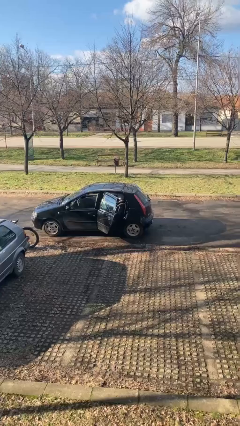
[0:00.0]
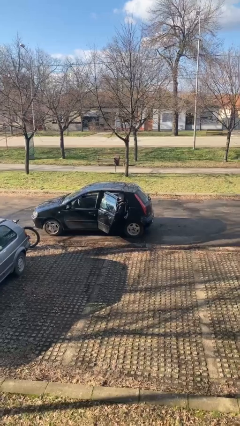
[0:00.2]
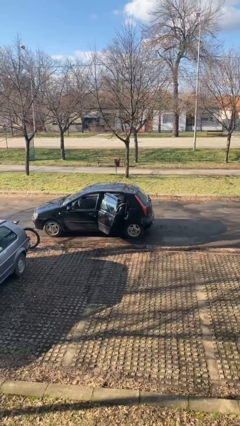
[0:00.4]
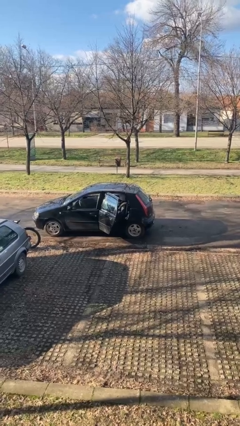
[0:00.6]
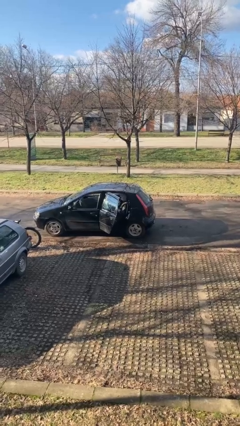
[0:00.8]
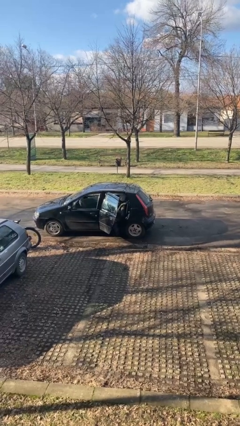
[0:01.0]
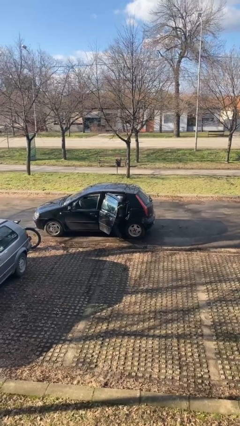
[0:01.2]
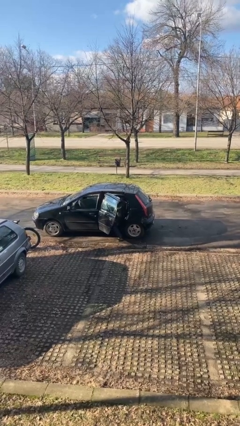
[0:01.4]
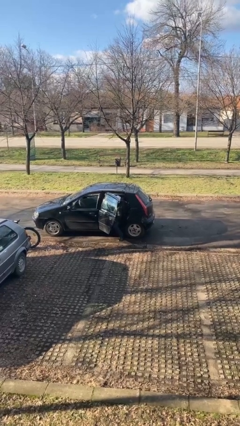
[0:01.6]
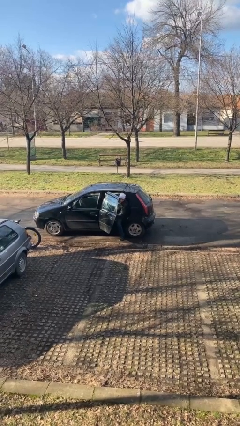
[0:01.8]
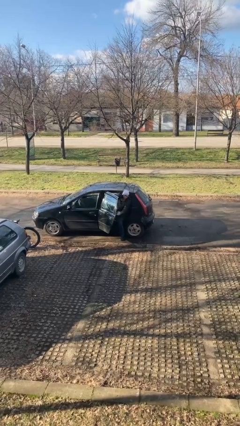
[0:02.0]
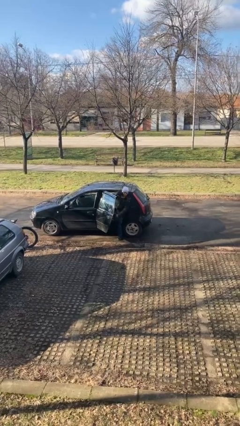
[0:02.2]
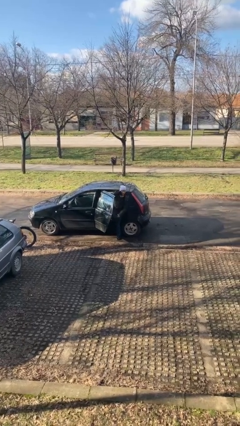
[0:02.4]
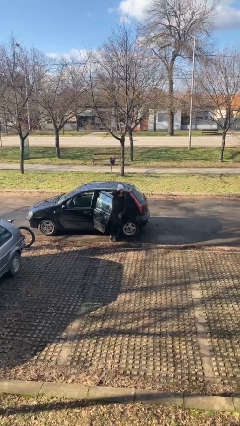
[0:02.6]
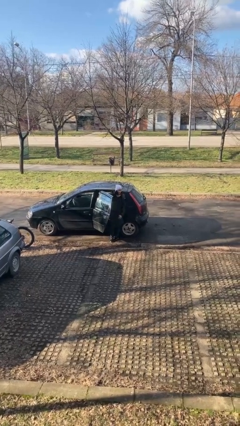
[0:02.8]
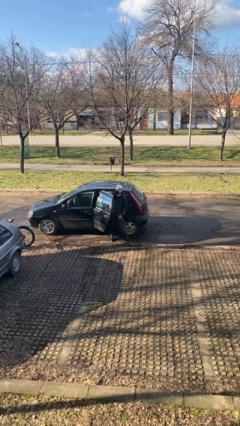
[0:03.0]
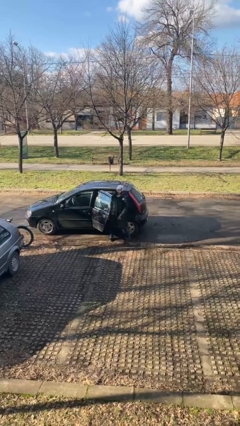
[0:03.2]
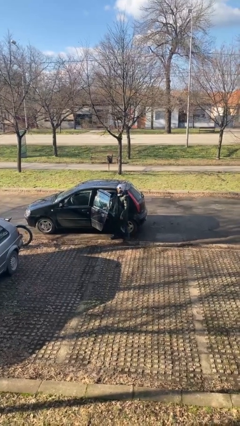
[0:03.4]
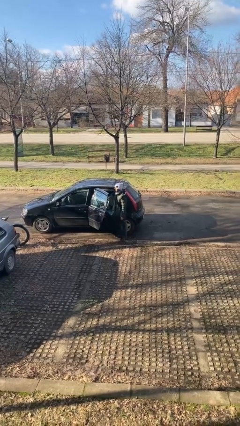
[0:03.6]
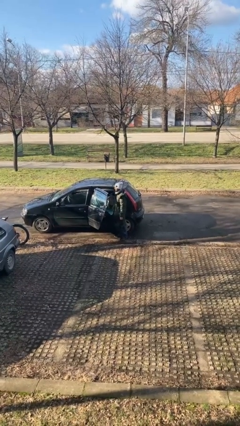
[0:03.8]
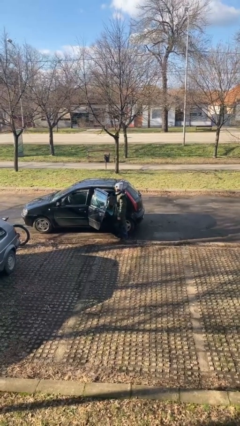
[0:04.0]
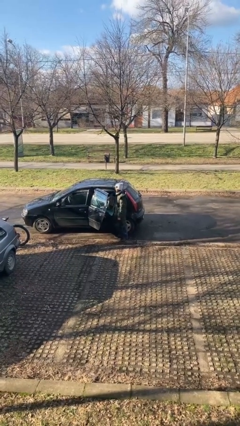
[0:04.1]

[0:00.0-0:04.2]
person exits car

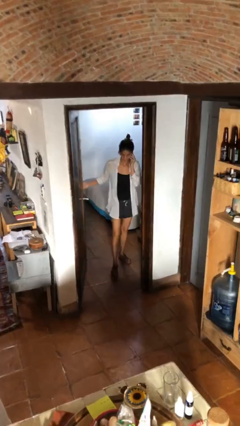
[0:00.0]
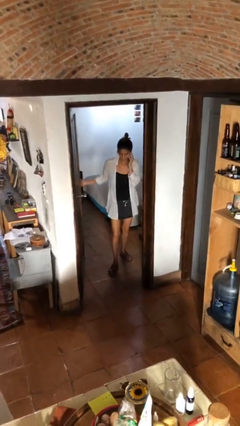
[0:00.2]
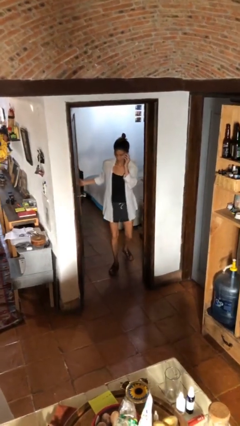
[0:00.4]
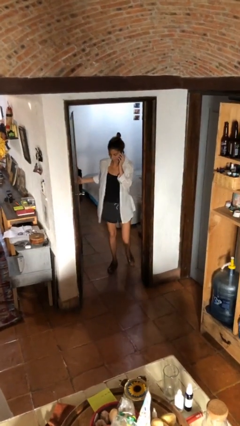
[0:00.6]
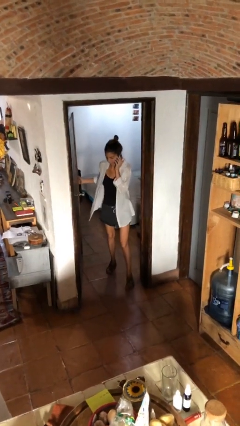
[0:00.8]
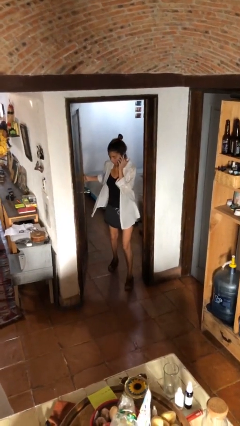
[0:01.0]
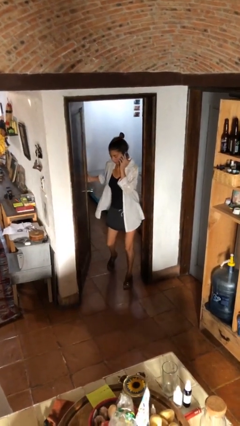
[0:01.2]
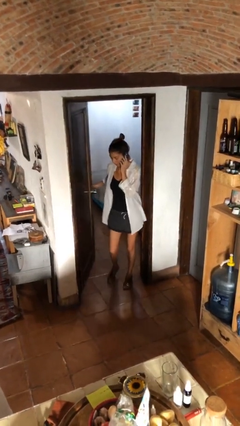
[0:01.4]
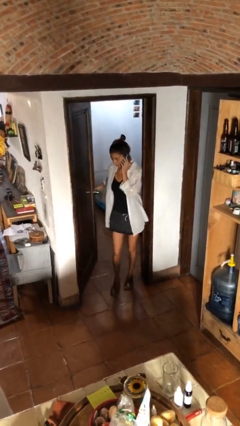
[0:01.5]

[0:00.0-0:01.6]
person enters scene through structure

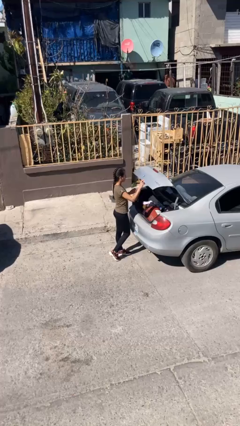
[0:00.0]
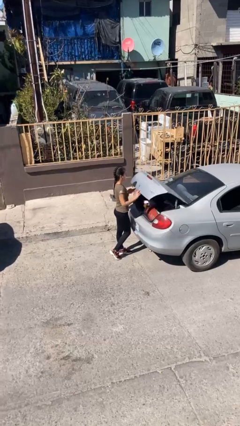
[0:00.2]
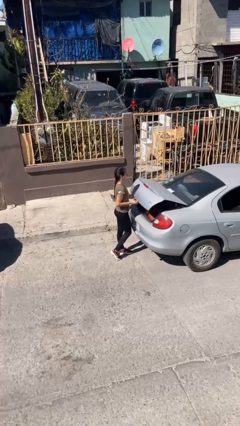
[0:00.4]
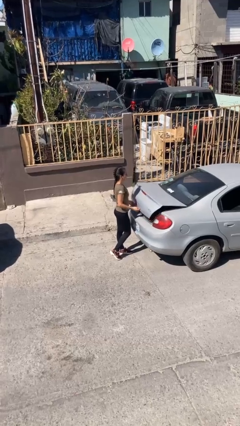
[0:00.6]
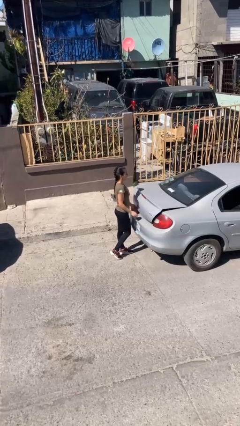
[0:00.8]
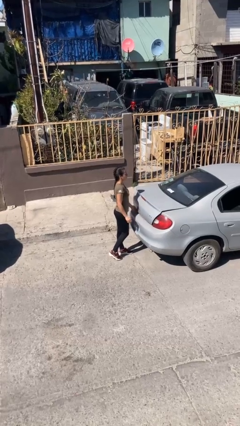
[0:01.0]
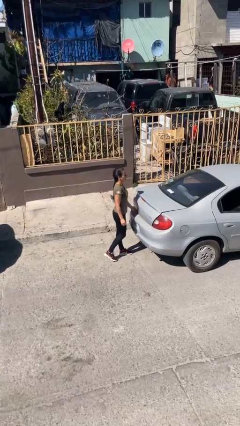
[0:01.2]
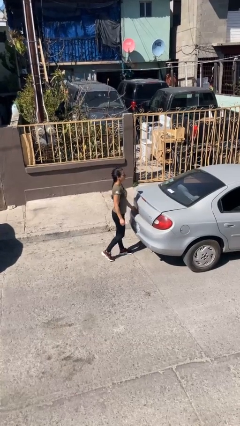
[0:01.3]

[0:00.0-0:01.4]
person closes car trunk

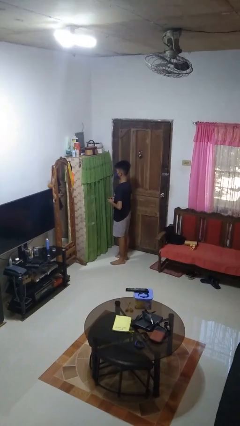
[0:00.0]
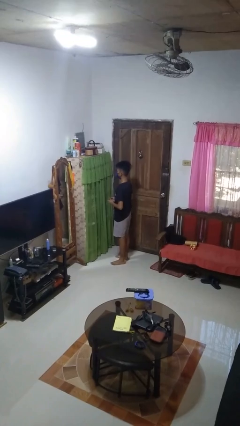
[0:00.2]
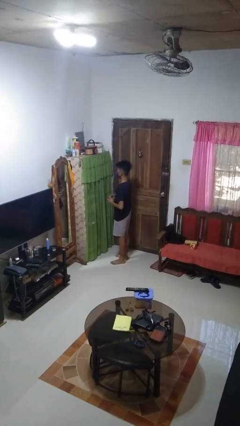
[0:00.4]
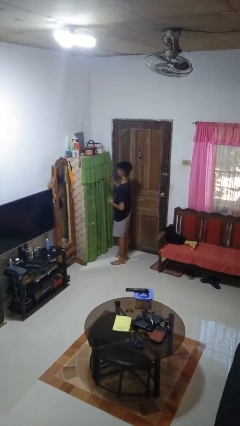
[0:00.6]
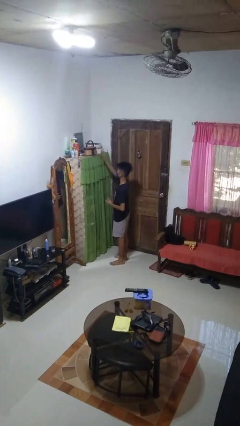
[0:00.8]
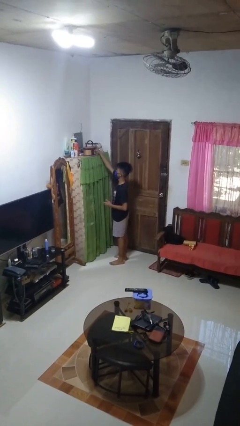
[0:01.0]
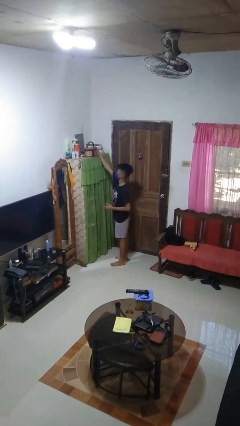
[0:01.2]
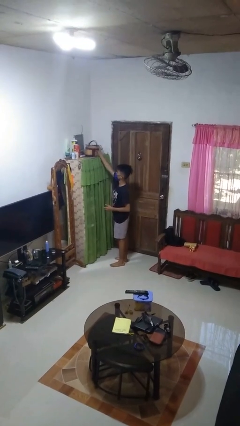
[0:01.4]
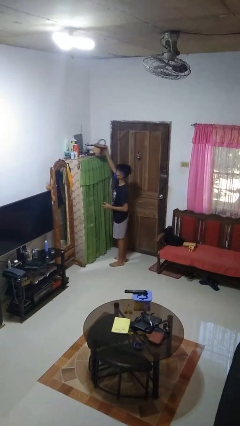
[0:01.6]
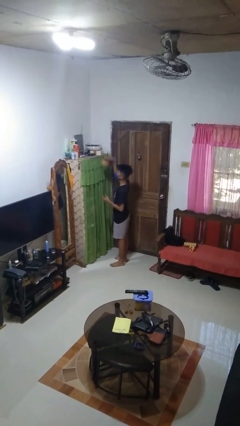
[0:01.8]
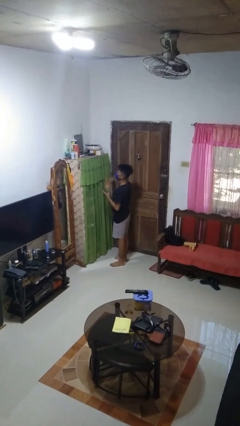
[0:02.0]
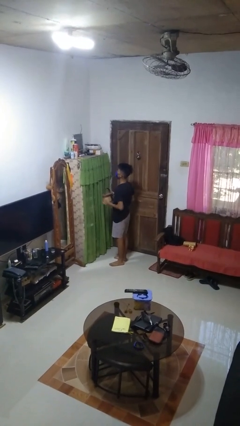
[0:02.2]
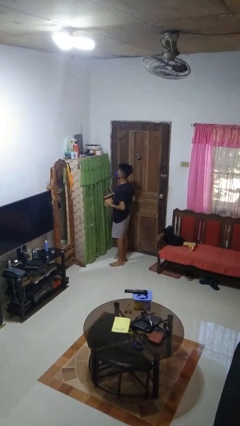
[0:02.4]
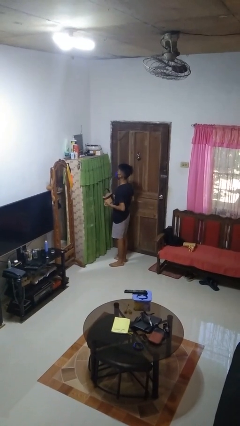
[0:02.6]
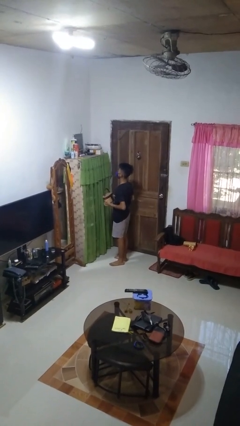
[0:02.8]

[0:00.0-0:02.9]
person picks up object from shelf

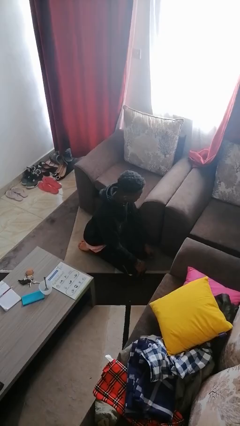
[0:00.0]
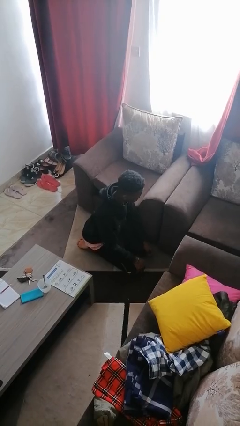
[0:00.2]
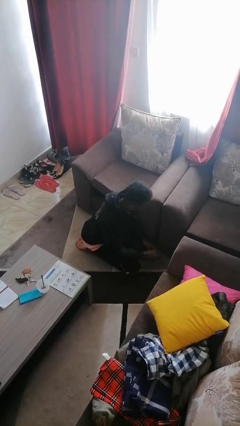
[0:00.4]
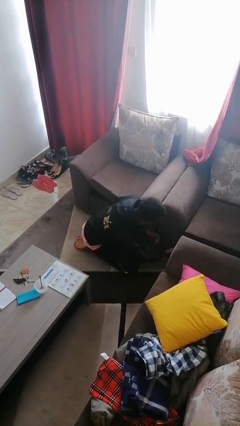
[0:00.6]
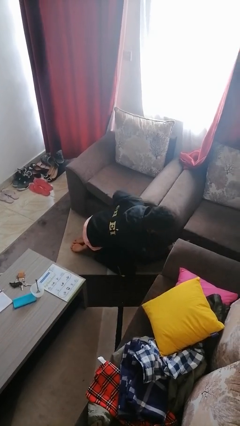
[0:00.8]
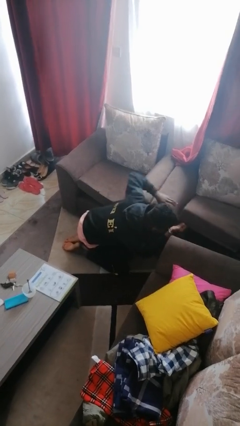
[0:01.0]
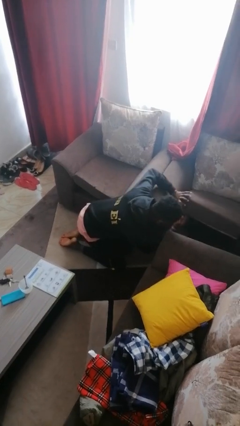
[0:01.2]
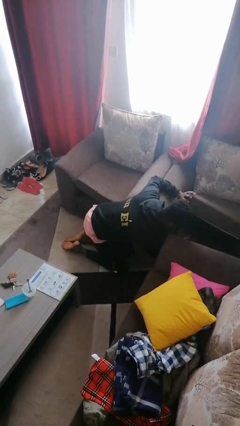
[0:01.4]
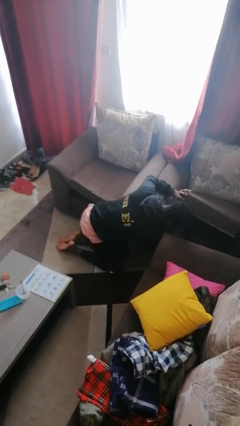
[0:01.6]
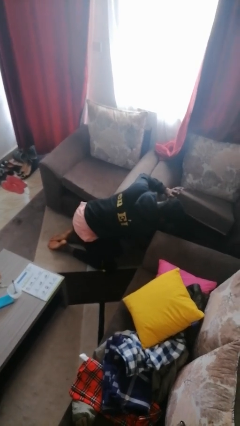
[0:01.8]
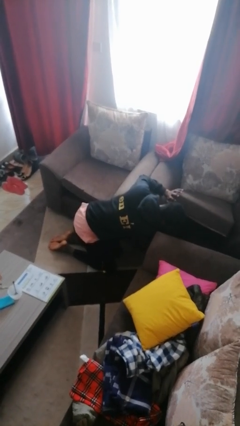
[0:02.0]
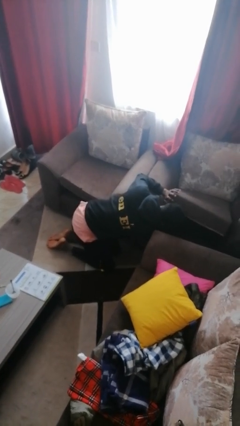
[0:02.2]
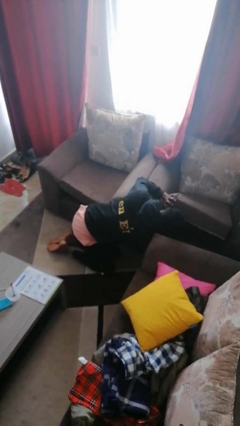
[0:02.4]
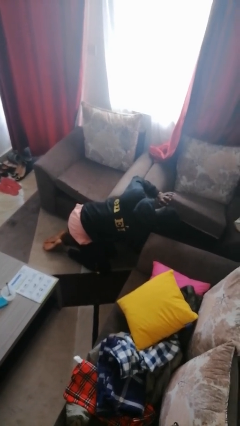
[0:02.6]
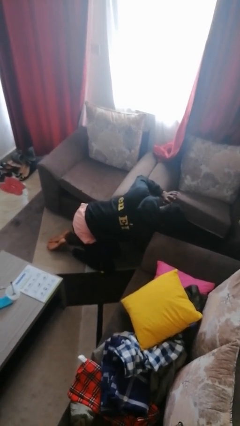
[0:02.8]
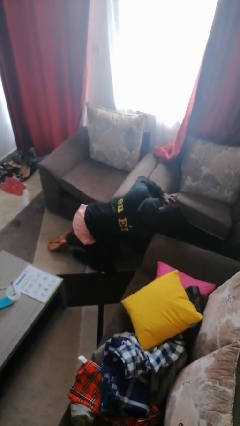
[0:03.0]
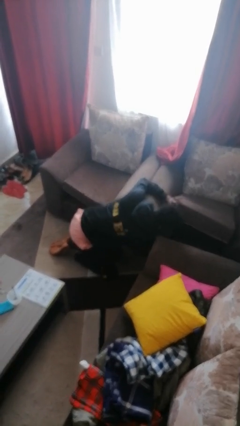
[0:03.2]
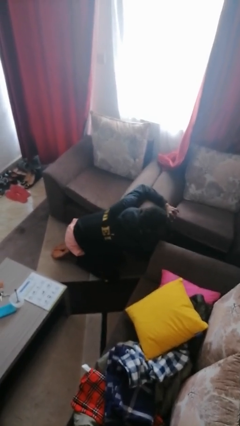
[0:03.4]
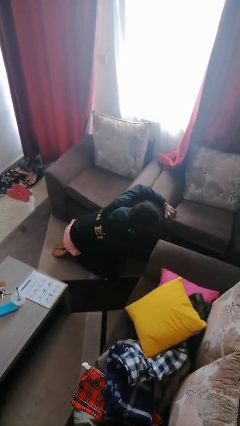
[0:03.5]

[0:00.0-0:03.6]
person searches in couch

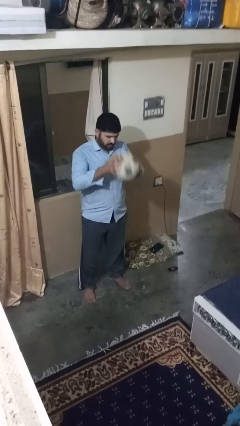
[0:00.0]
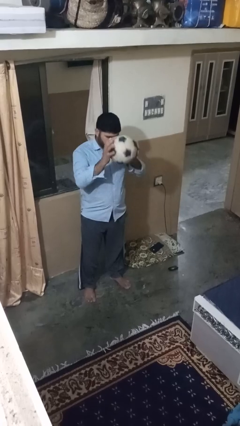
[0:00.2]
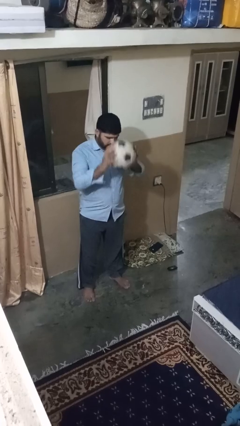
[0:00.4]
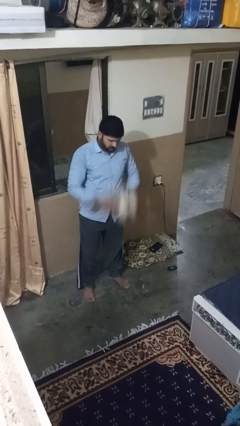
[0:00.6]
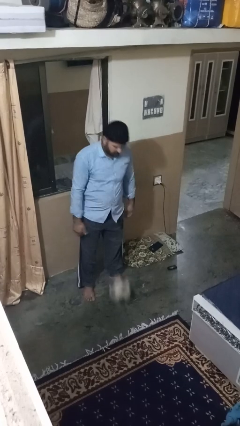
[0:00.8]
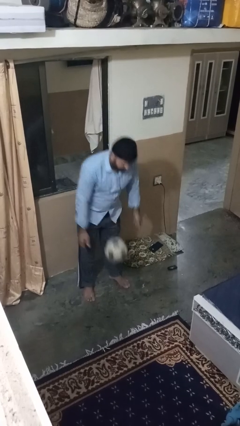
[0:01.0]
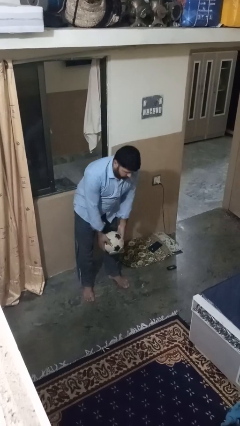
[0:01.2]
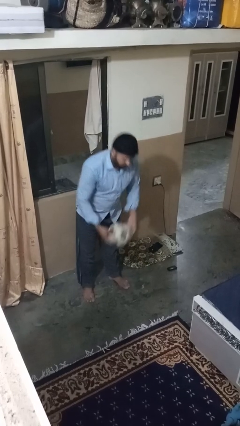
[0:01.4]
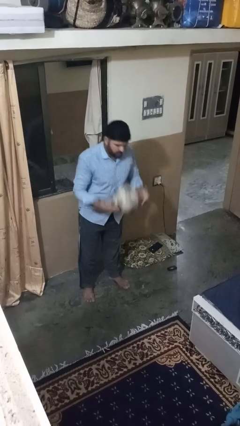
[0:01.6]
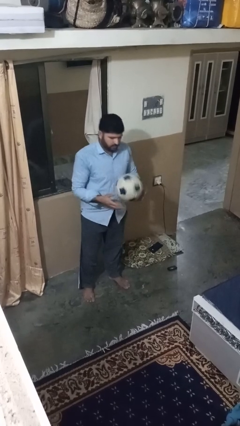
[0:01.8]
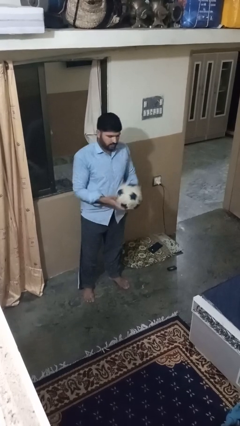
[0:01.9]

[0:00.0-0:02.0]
person bounces ball on floor

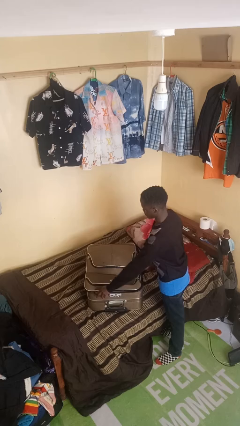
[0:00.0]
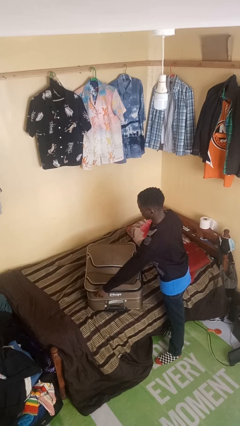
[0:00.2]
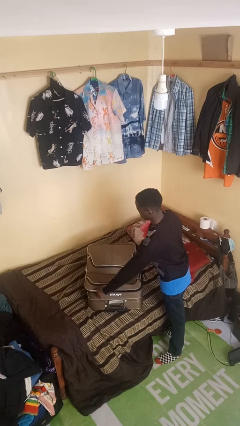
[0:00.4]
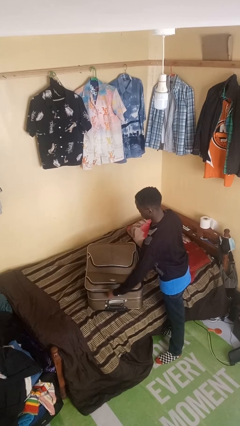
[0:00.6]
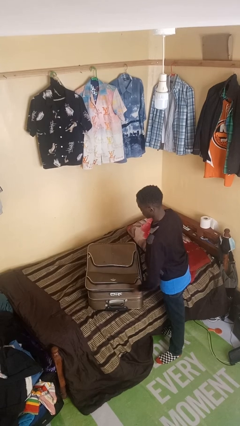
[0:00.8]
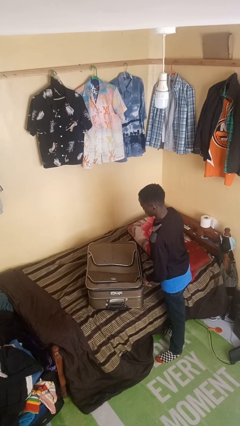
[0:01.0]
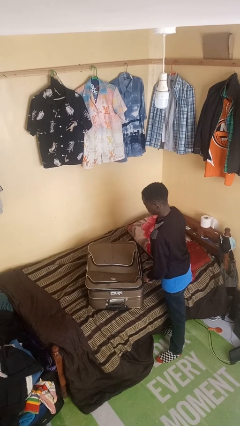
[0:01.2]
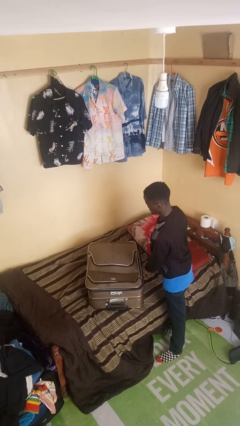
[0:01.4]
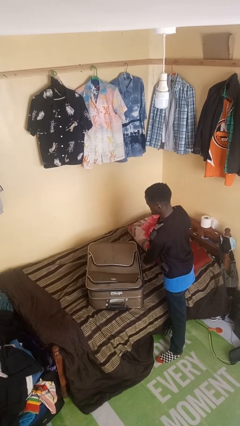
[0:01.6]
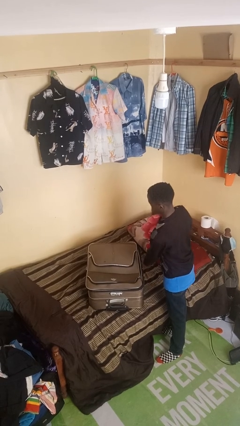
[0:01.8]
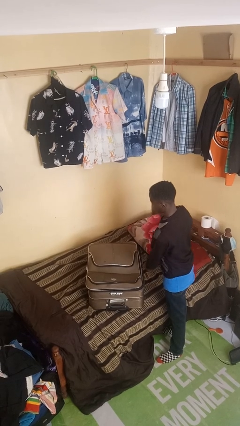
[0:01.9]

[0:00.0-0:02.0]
person closes suitcase
